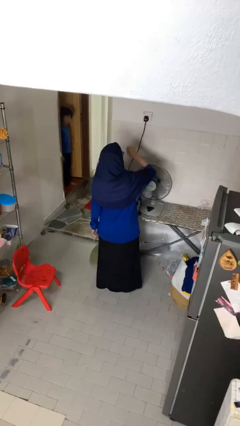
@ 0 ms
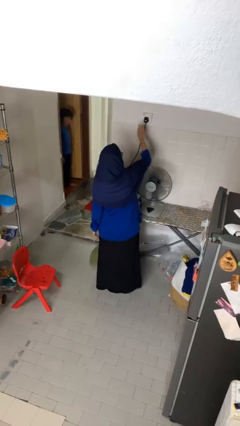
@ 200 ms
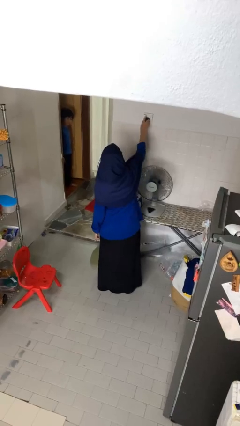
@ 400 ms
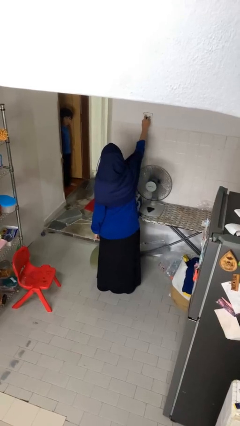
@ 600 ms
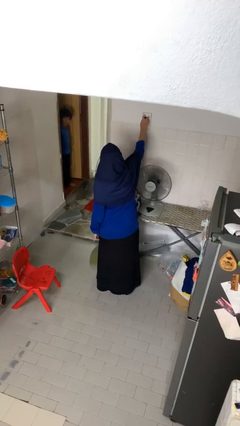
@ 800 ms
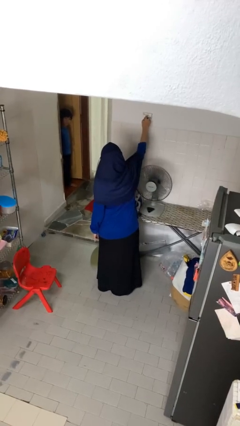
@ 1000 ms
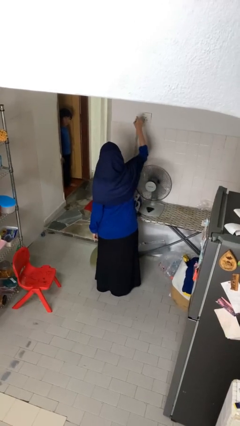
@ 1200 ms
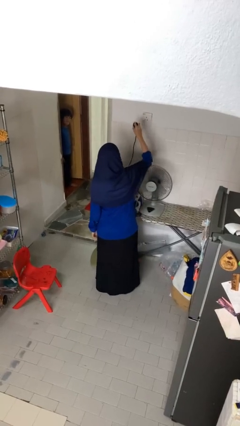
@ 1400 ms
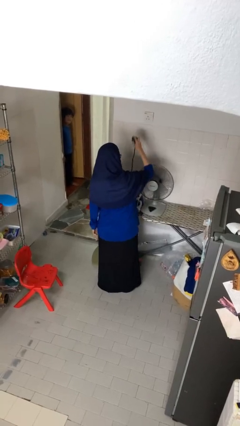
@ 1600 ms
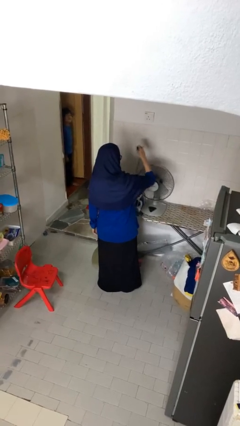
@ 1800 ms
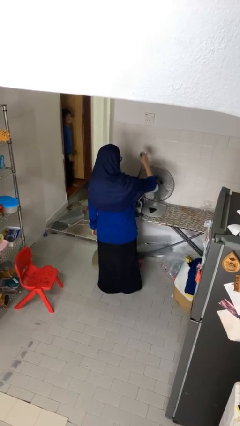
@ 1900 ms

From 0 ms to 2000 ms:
person unplugs from electrical socket

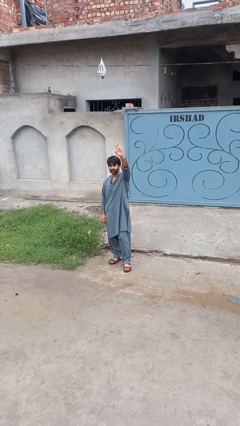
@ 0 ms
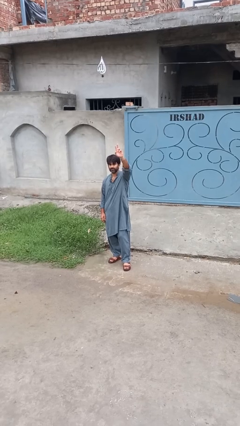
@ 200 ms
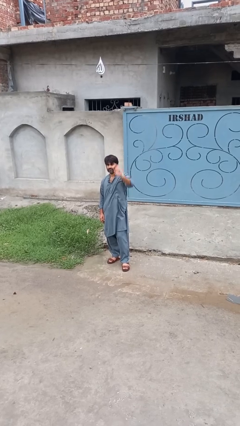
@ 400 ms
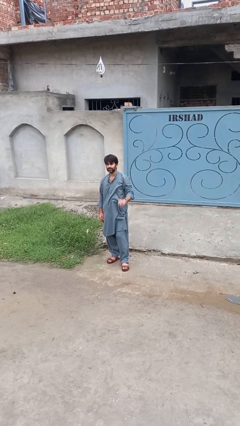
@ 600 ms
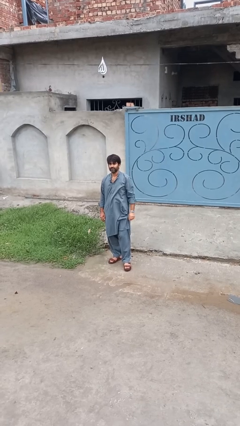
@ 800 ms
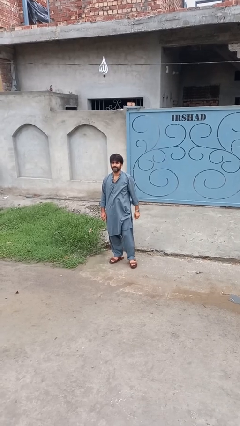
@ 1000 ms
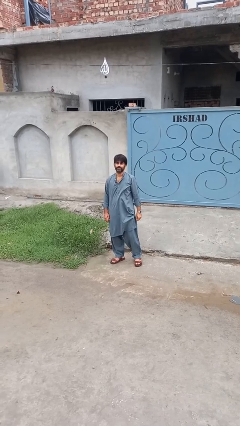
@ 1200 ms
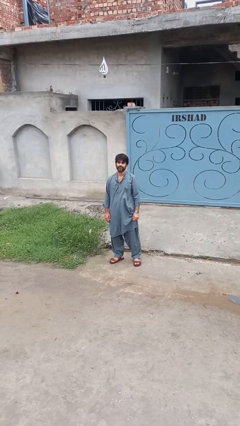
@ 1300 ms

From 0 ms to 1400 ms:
person gestures lower hand

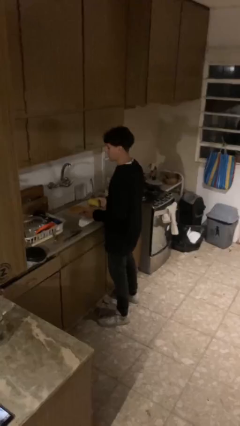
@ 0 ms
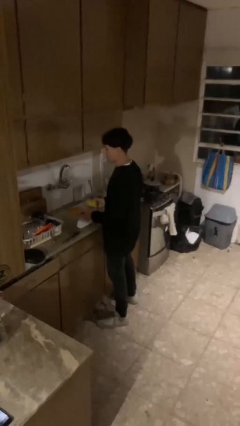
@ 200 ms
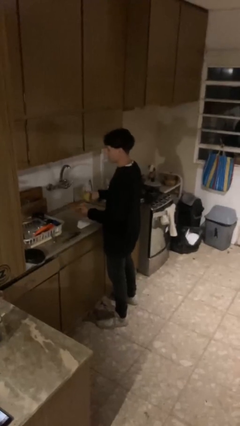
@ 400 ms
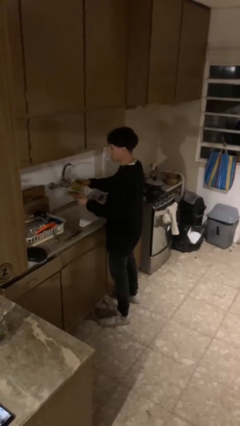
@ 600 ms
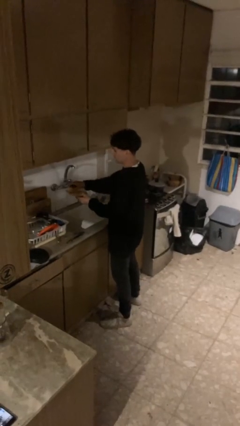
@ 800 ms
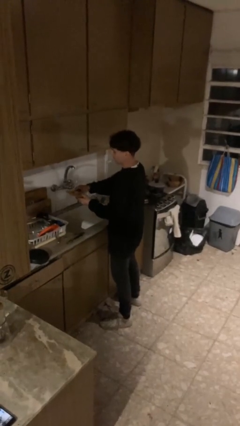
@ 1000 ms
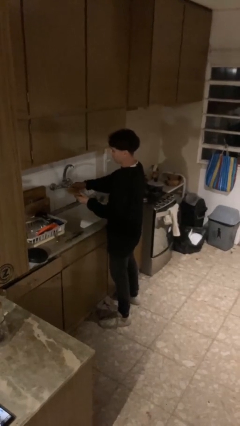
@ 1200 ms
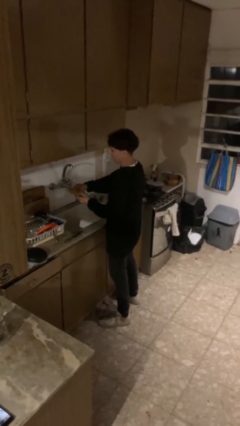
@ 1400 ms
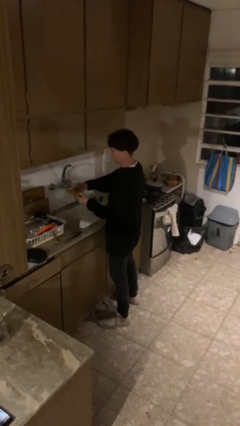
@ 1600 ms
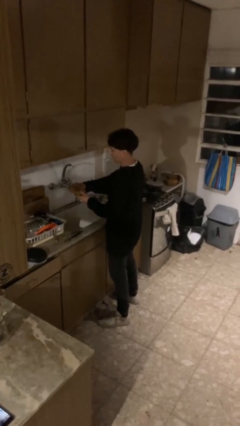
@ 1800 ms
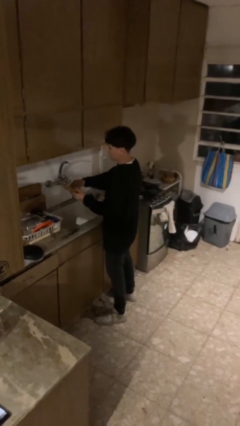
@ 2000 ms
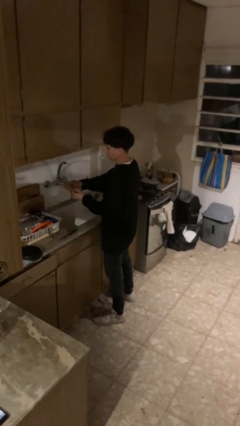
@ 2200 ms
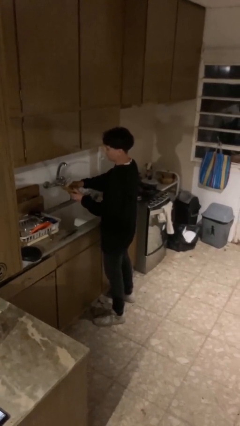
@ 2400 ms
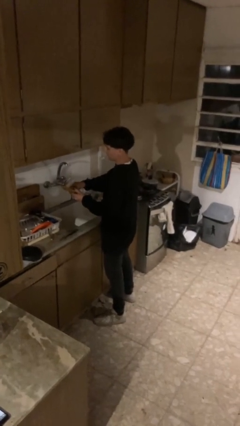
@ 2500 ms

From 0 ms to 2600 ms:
person washes dish

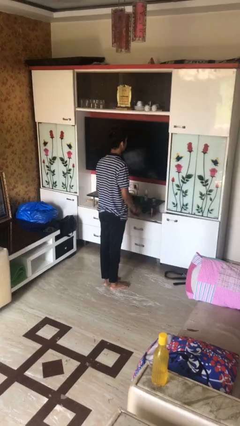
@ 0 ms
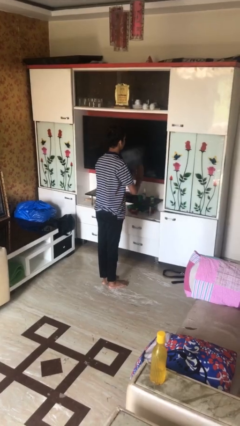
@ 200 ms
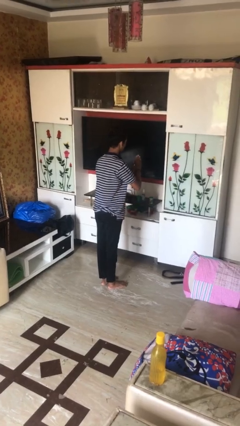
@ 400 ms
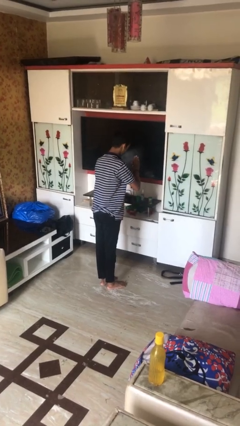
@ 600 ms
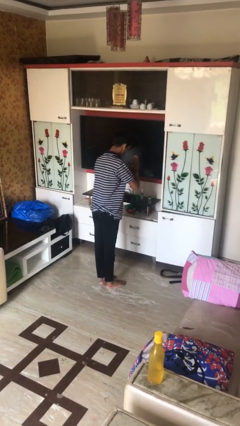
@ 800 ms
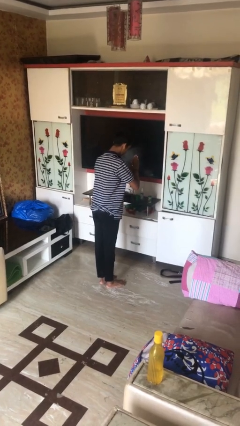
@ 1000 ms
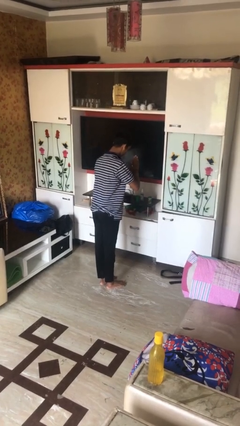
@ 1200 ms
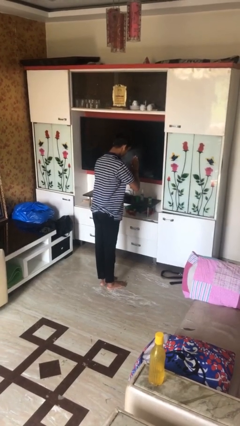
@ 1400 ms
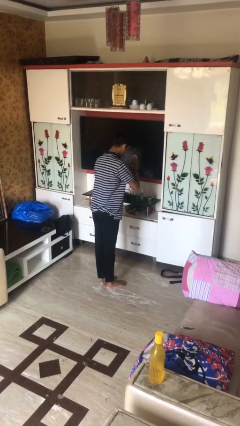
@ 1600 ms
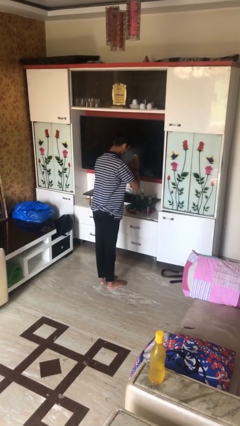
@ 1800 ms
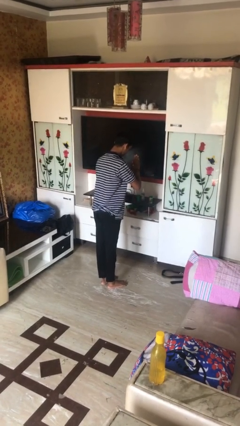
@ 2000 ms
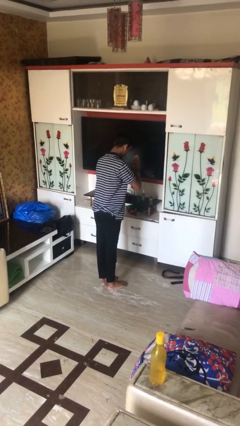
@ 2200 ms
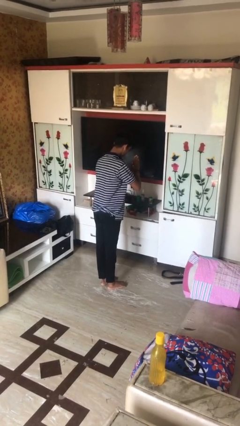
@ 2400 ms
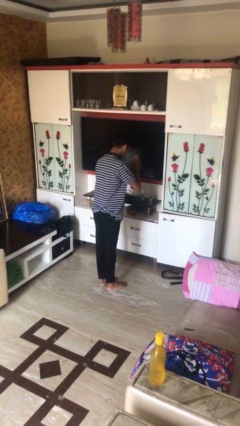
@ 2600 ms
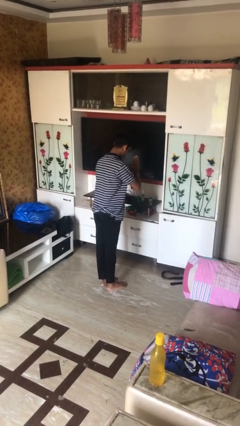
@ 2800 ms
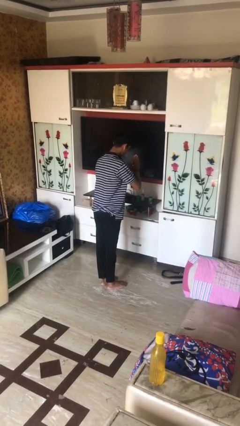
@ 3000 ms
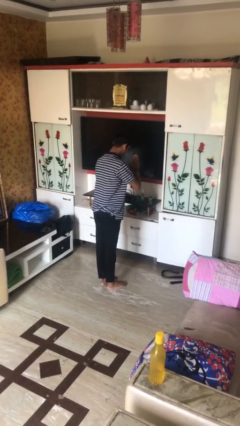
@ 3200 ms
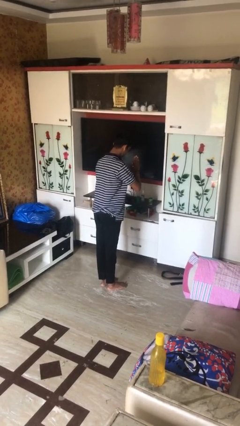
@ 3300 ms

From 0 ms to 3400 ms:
person prays

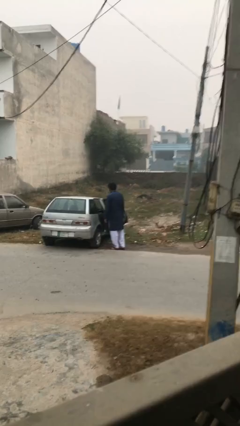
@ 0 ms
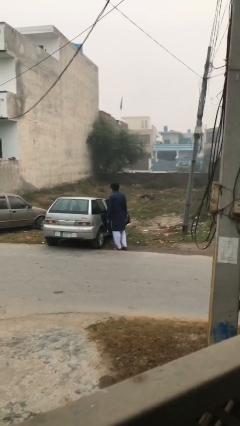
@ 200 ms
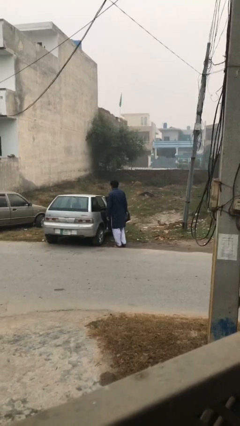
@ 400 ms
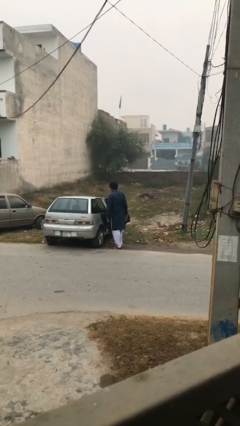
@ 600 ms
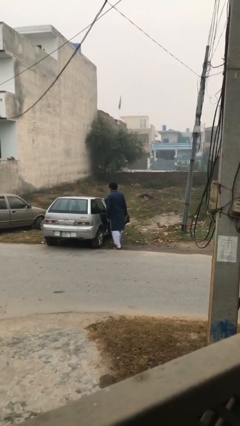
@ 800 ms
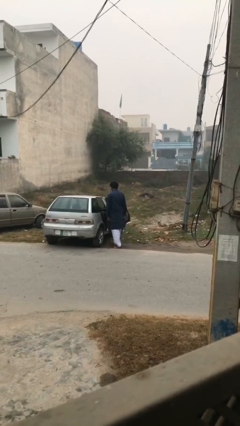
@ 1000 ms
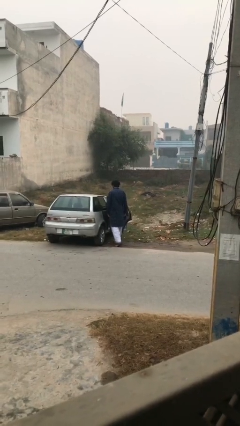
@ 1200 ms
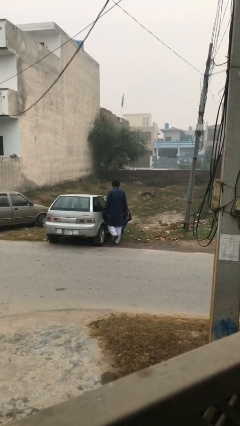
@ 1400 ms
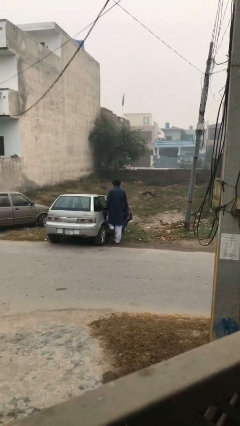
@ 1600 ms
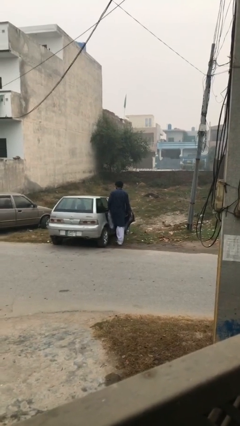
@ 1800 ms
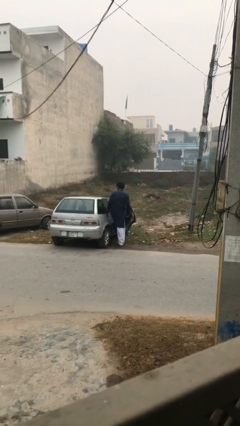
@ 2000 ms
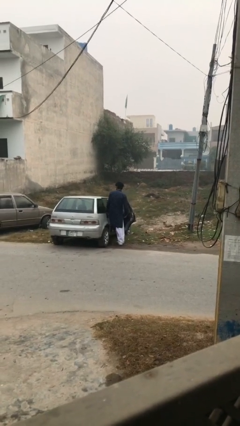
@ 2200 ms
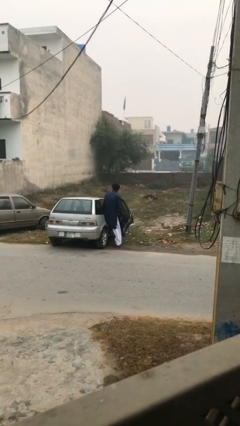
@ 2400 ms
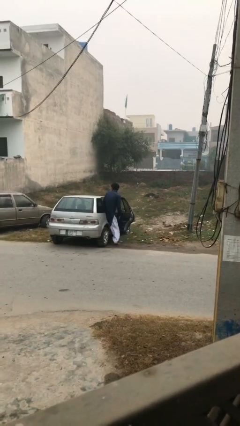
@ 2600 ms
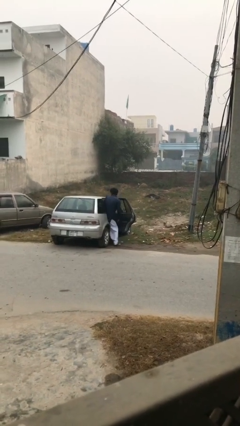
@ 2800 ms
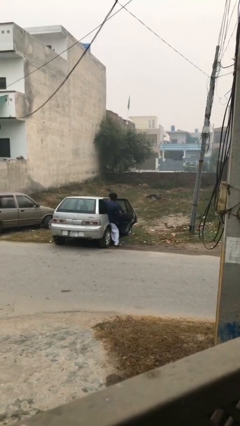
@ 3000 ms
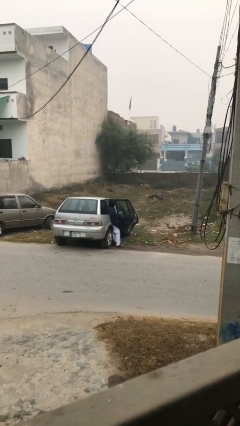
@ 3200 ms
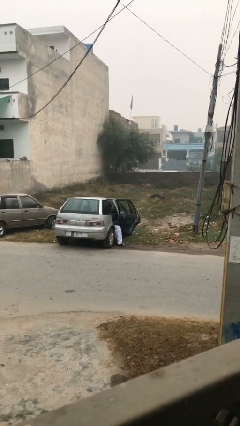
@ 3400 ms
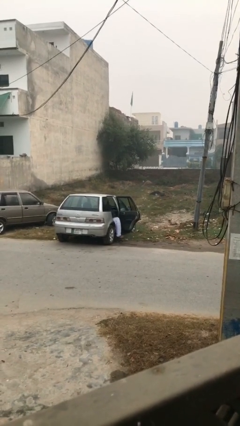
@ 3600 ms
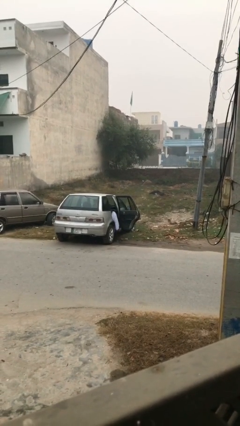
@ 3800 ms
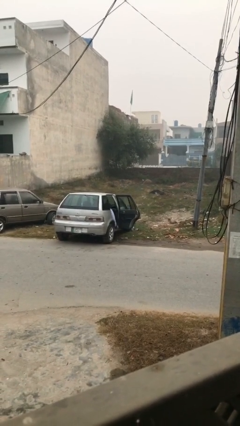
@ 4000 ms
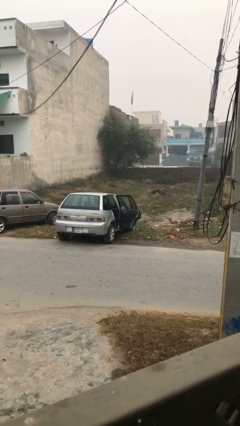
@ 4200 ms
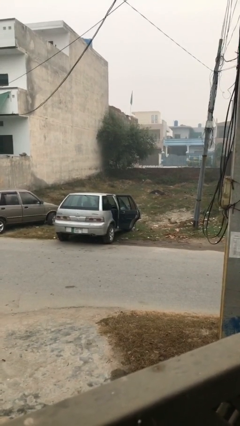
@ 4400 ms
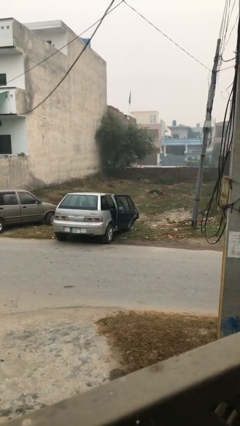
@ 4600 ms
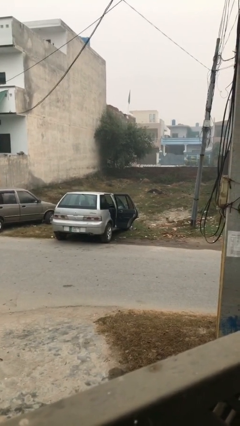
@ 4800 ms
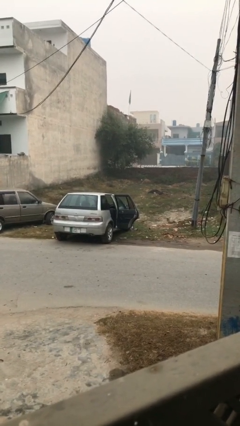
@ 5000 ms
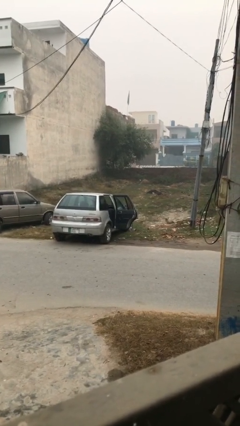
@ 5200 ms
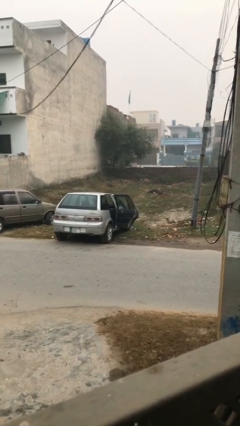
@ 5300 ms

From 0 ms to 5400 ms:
person enters car

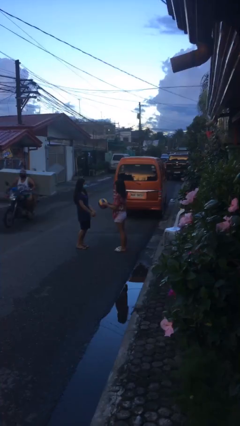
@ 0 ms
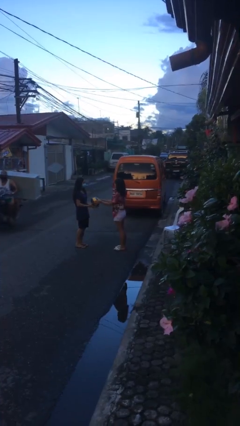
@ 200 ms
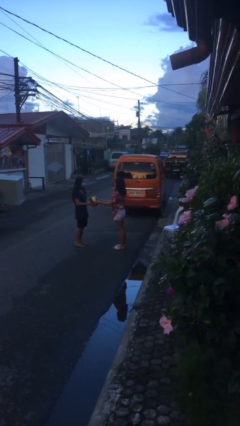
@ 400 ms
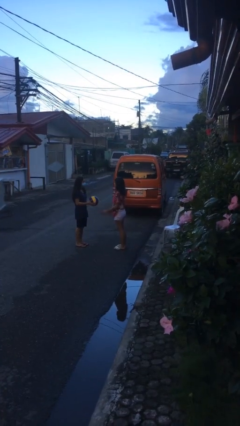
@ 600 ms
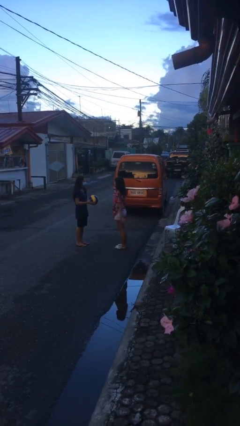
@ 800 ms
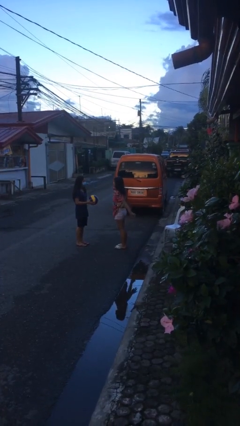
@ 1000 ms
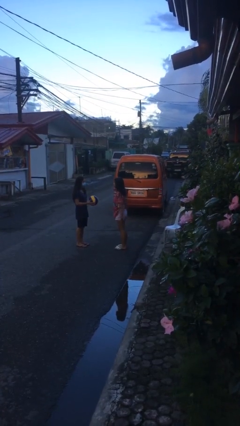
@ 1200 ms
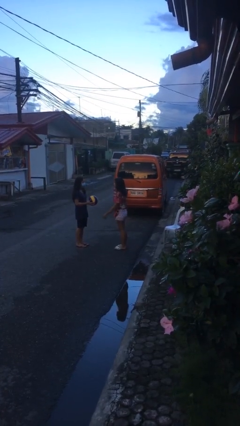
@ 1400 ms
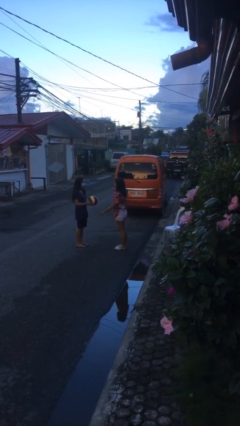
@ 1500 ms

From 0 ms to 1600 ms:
person transfers object to person

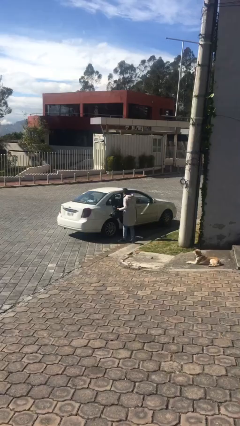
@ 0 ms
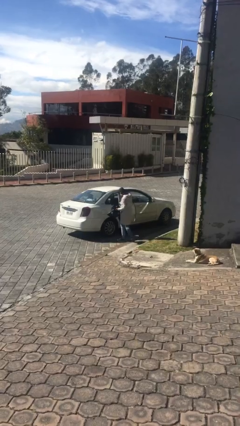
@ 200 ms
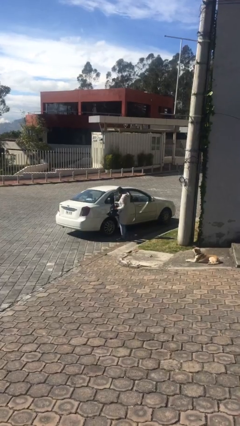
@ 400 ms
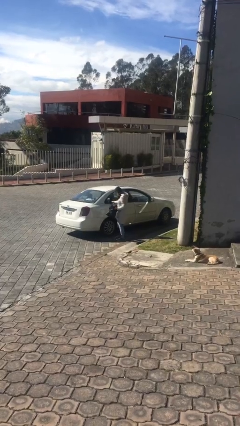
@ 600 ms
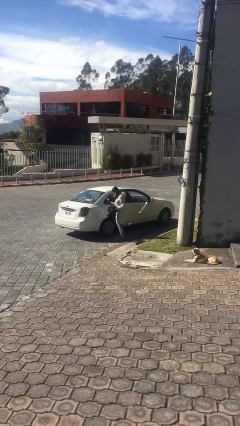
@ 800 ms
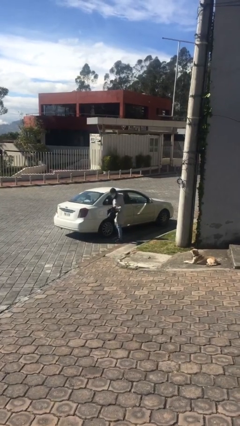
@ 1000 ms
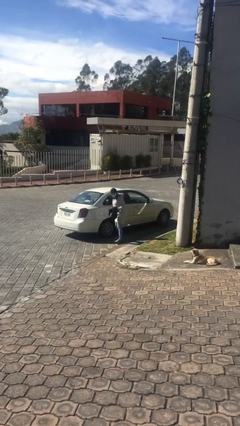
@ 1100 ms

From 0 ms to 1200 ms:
person closes car door
